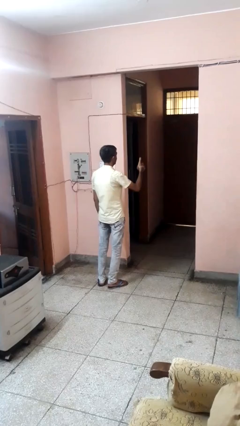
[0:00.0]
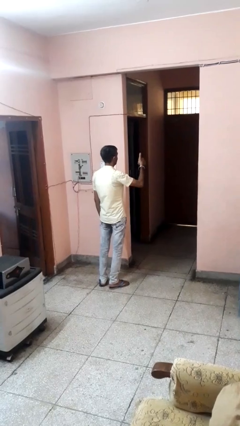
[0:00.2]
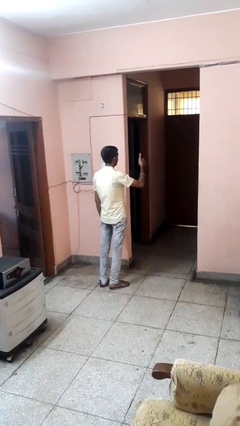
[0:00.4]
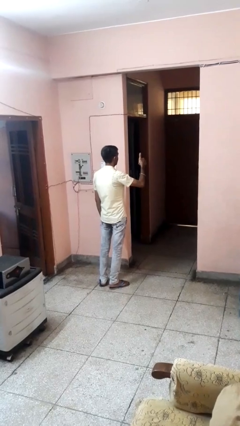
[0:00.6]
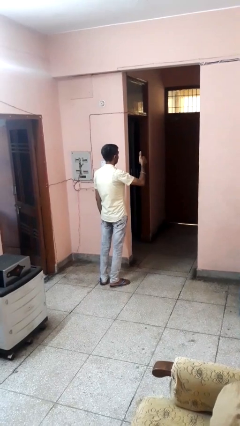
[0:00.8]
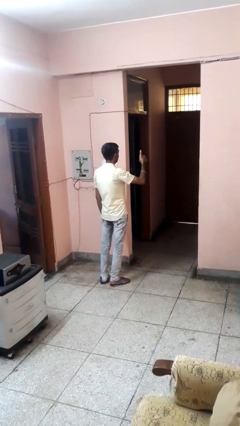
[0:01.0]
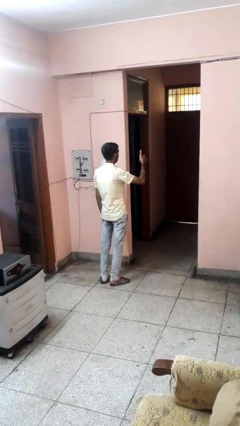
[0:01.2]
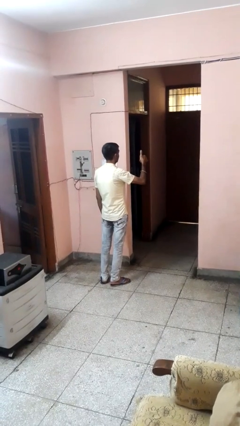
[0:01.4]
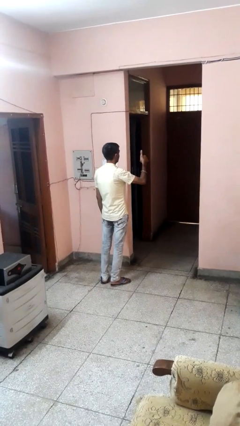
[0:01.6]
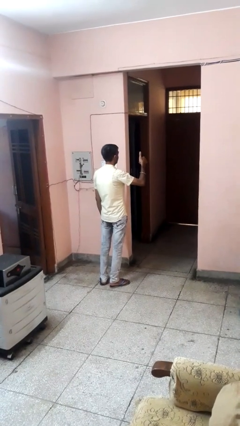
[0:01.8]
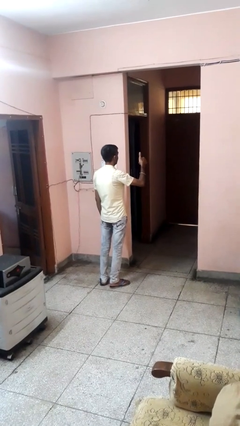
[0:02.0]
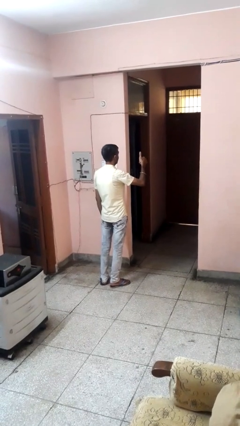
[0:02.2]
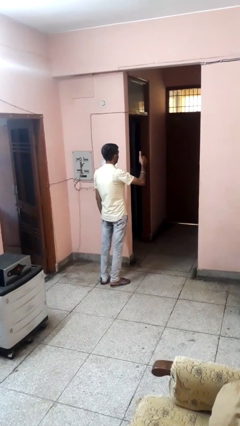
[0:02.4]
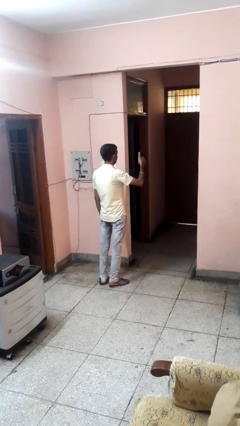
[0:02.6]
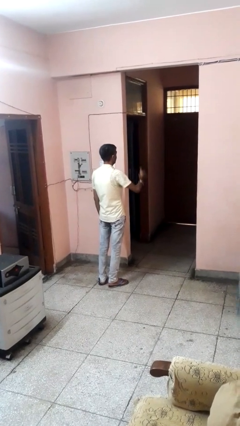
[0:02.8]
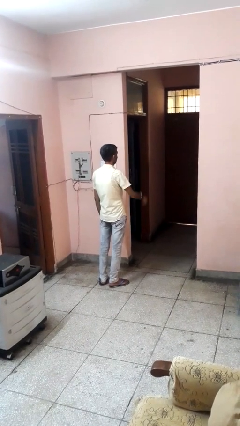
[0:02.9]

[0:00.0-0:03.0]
person gestures thumbs up

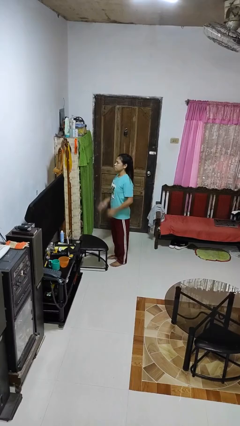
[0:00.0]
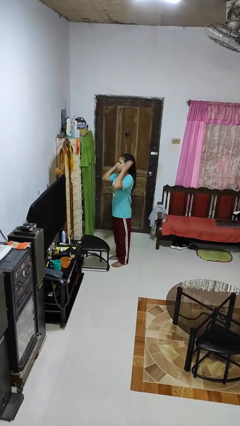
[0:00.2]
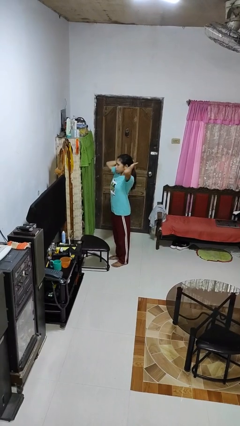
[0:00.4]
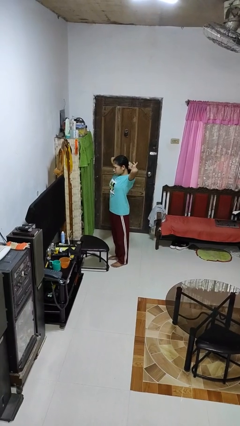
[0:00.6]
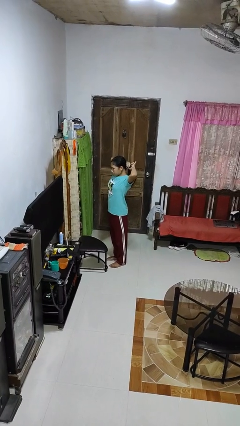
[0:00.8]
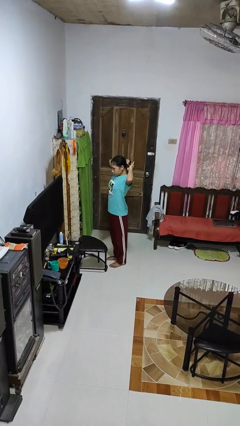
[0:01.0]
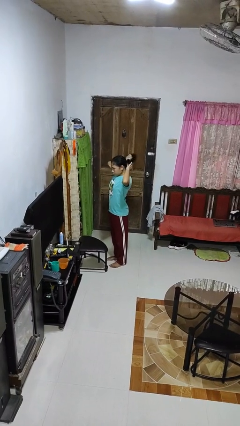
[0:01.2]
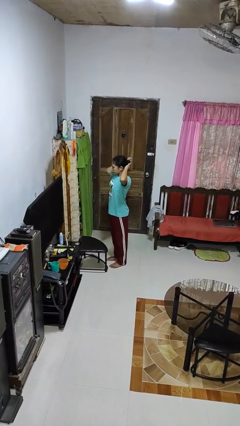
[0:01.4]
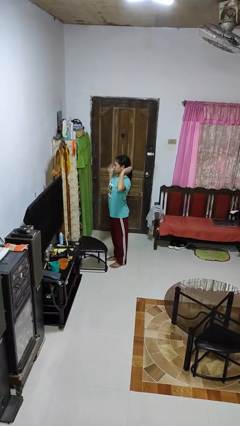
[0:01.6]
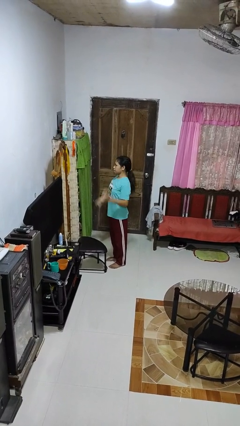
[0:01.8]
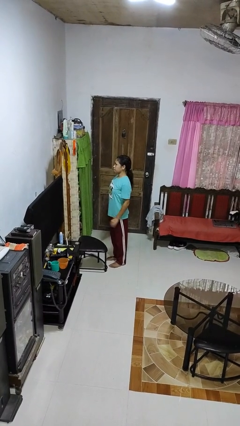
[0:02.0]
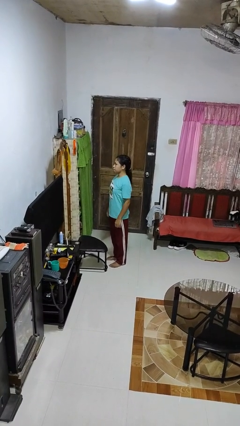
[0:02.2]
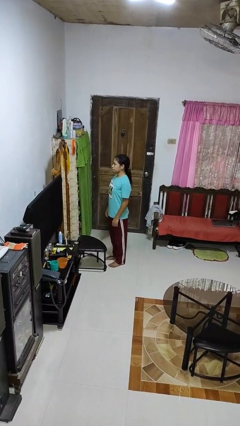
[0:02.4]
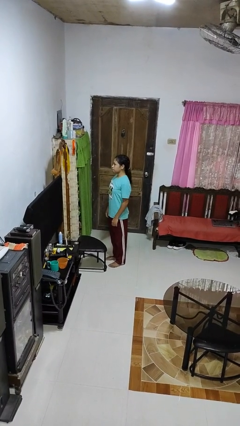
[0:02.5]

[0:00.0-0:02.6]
person puts hair in ponytail

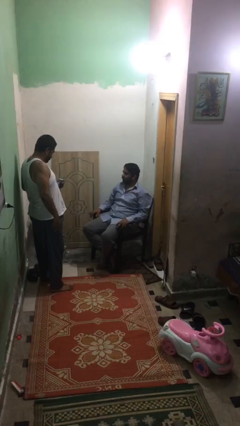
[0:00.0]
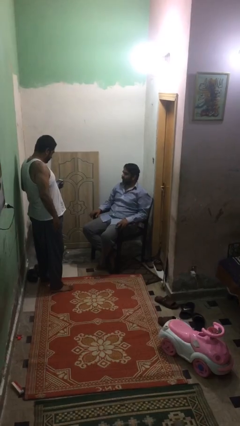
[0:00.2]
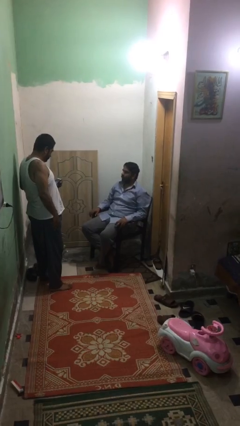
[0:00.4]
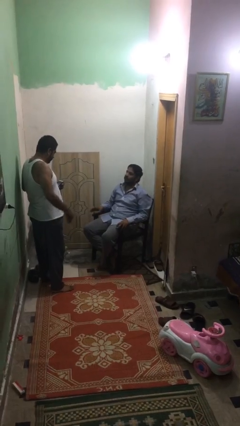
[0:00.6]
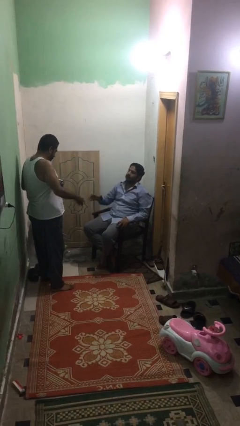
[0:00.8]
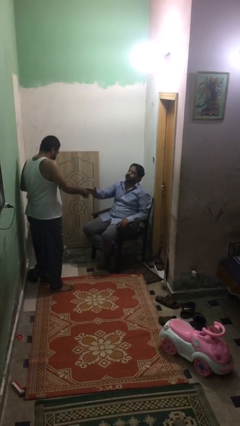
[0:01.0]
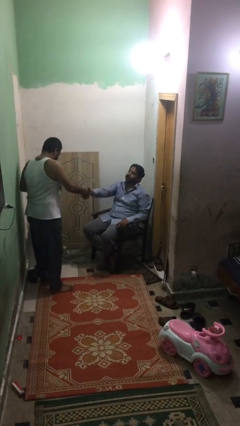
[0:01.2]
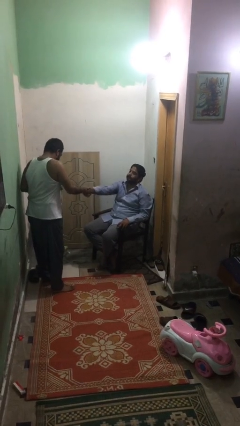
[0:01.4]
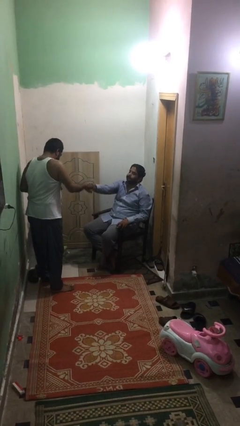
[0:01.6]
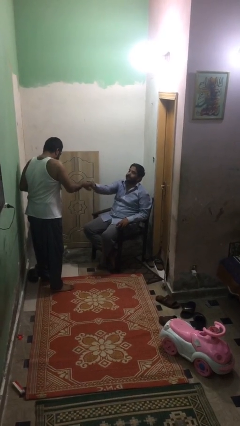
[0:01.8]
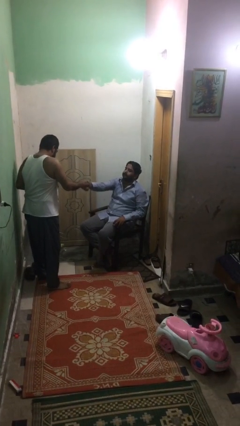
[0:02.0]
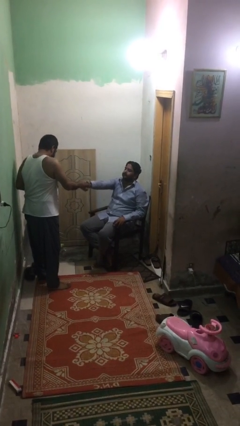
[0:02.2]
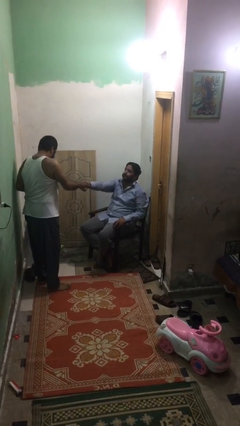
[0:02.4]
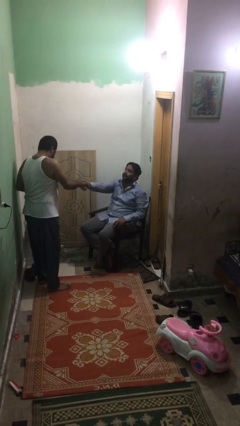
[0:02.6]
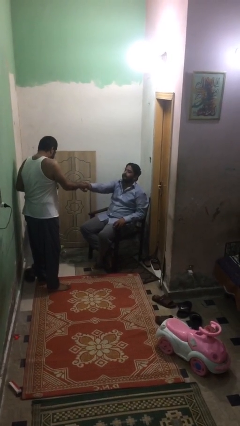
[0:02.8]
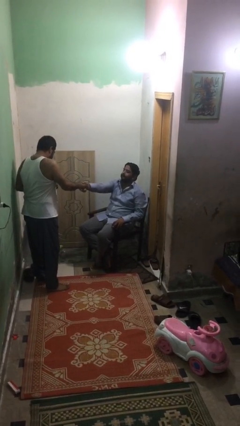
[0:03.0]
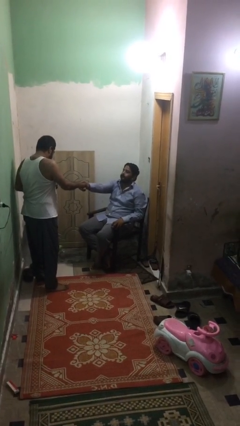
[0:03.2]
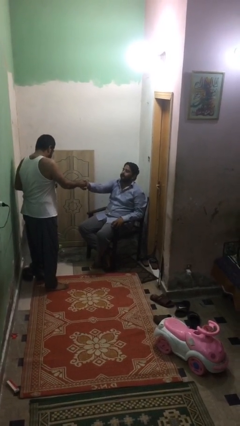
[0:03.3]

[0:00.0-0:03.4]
person shakes hand

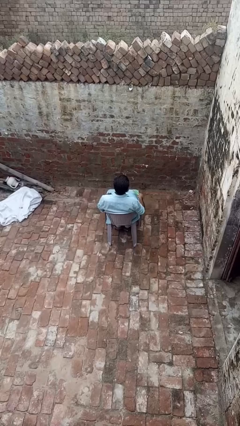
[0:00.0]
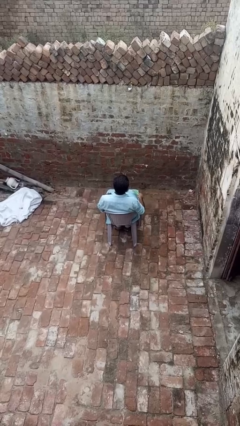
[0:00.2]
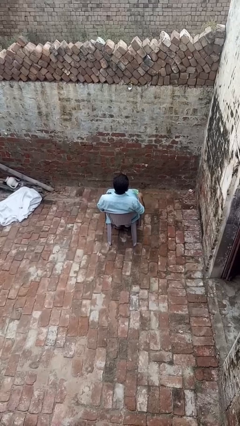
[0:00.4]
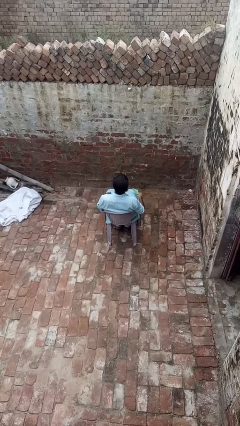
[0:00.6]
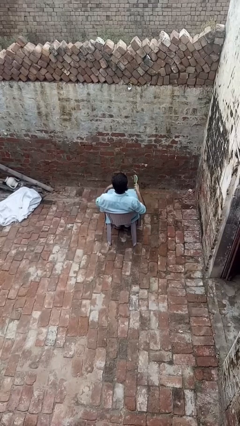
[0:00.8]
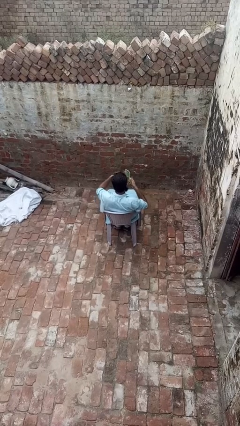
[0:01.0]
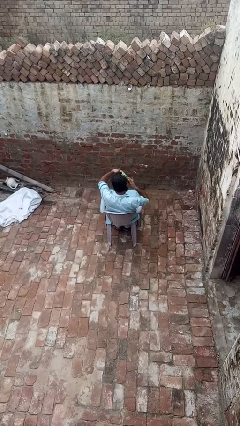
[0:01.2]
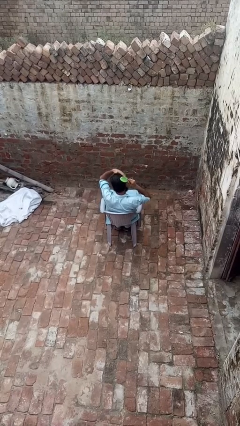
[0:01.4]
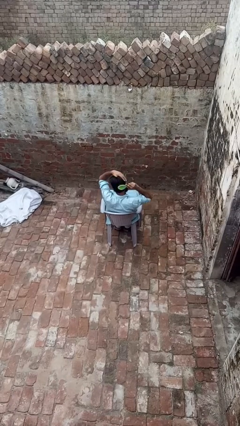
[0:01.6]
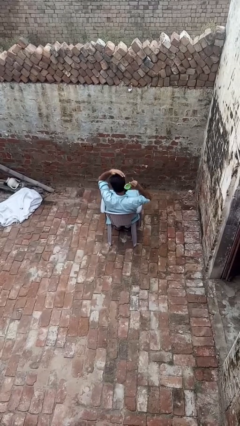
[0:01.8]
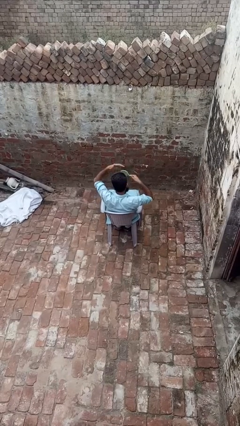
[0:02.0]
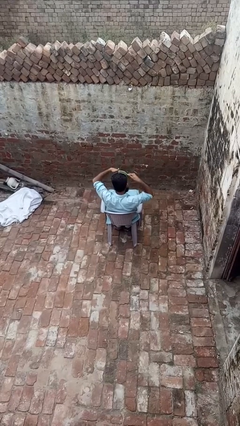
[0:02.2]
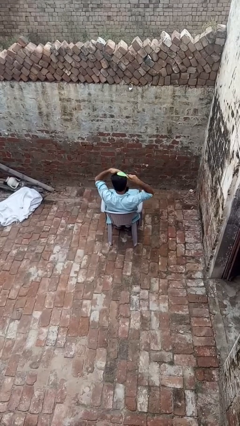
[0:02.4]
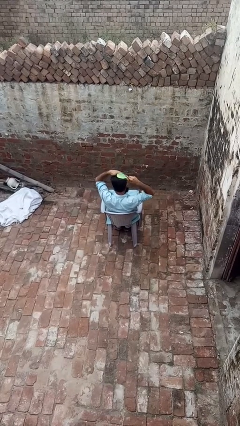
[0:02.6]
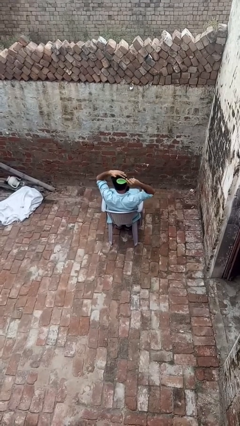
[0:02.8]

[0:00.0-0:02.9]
person brushes hair

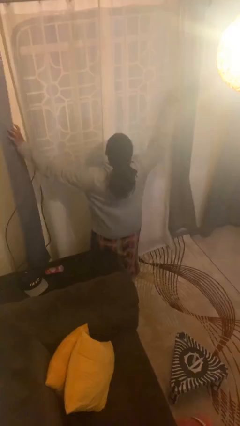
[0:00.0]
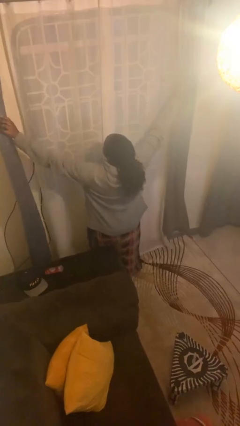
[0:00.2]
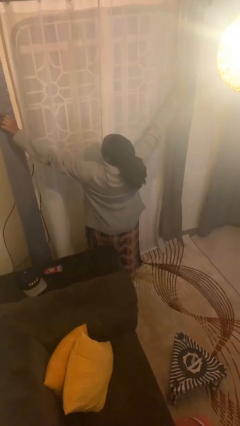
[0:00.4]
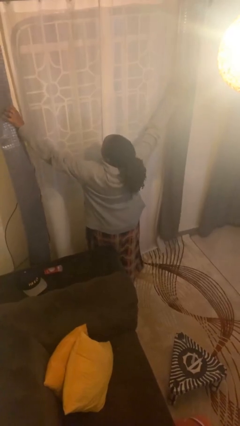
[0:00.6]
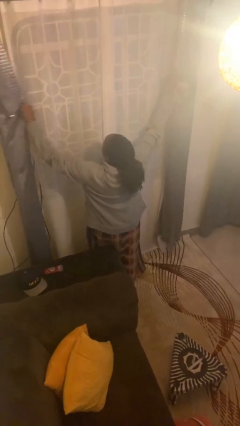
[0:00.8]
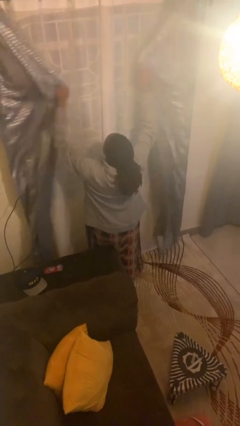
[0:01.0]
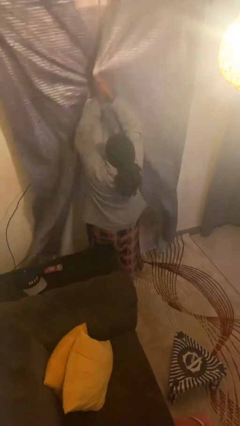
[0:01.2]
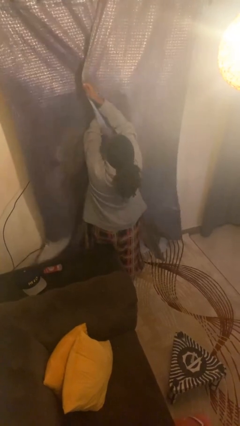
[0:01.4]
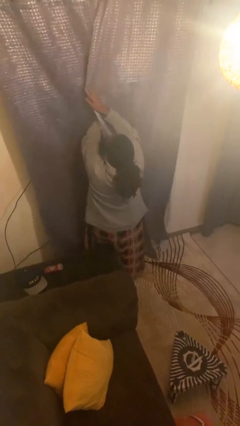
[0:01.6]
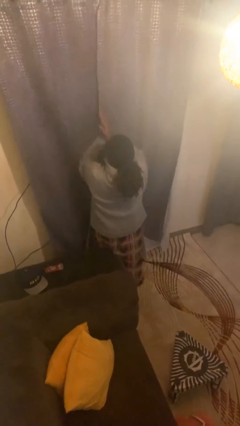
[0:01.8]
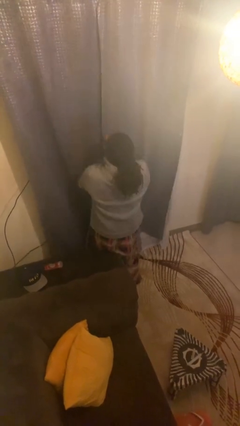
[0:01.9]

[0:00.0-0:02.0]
person closes curtains

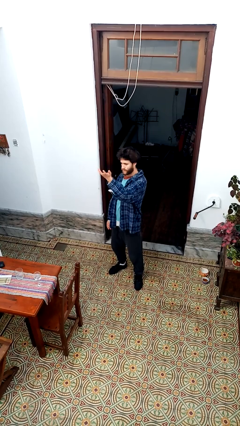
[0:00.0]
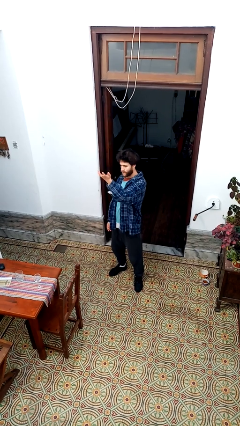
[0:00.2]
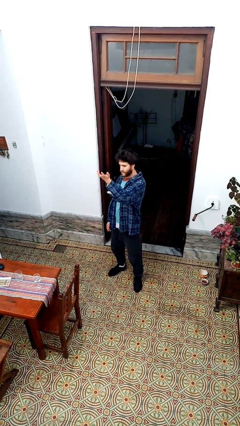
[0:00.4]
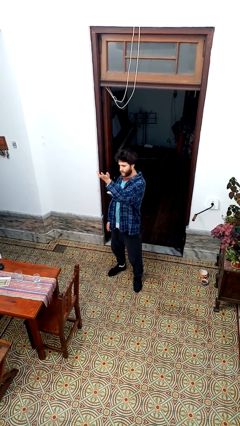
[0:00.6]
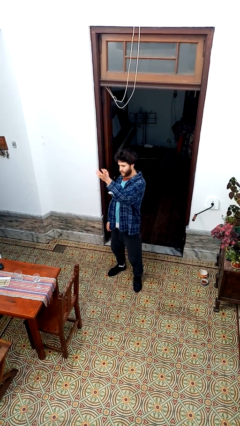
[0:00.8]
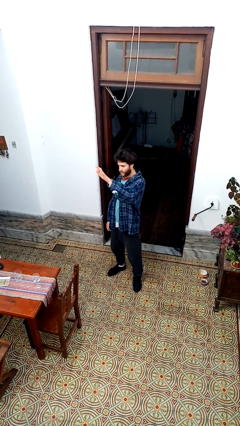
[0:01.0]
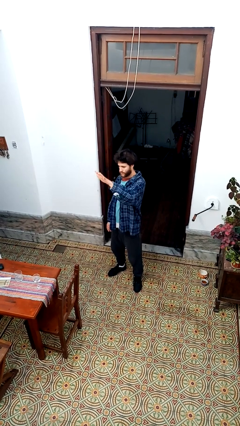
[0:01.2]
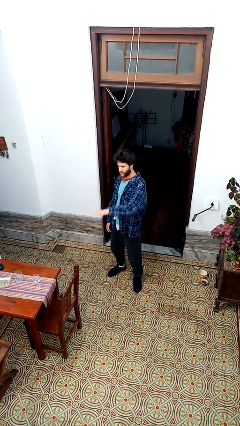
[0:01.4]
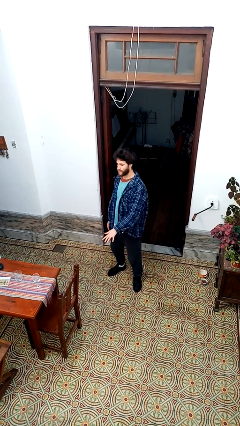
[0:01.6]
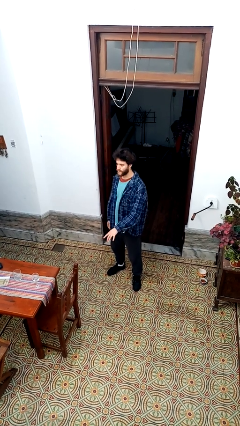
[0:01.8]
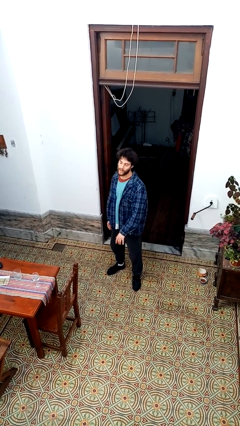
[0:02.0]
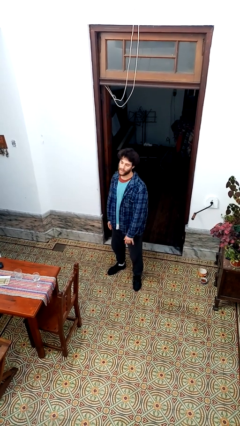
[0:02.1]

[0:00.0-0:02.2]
person gestures swipe down

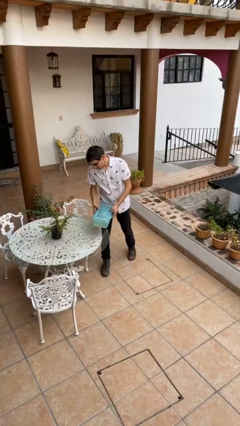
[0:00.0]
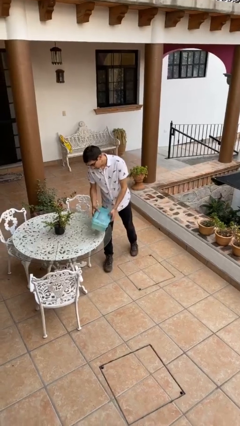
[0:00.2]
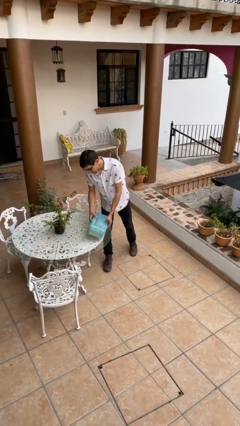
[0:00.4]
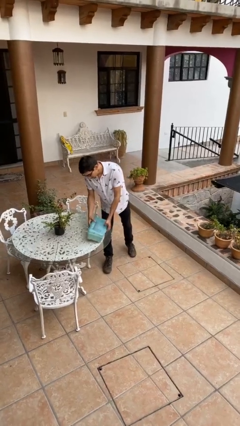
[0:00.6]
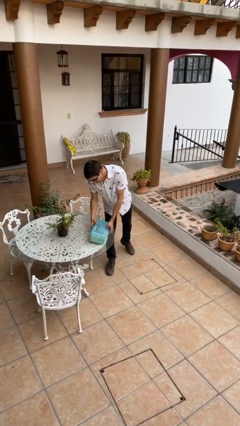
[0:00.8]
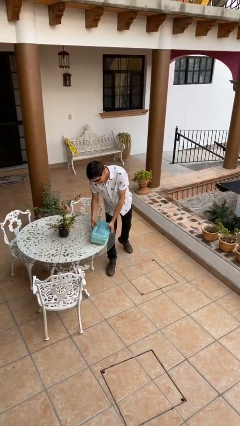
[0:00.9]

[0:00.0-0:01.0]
person puts down object on table
